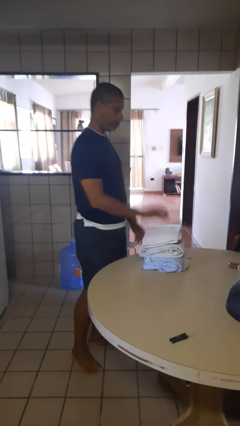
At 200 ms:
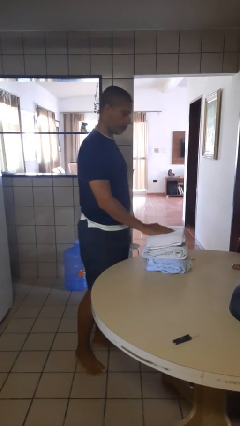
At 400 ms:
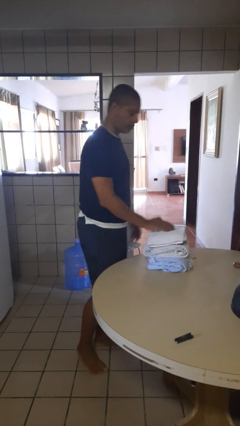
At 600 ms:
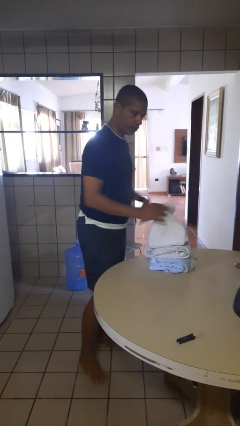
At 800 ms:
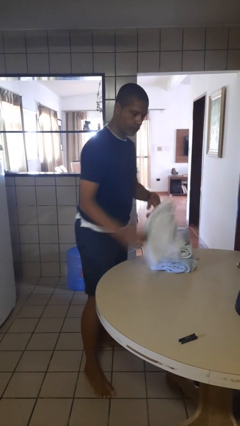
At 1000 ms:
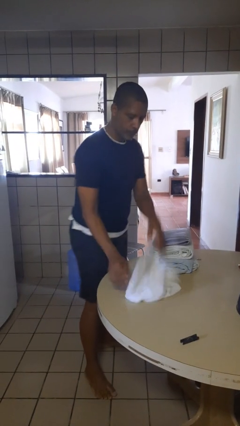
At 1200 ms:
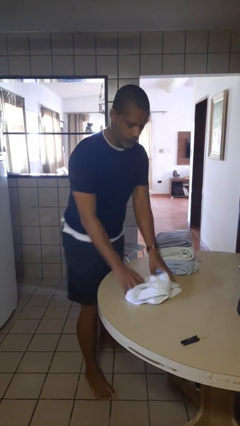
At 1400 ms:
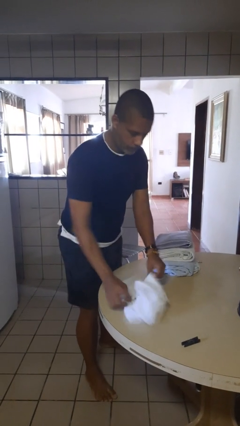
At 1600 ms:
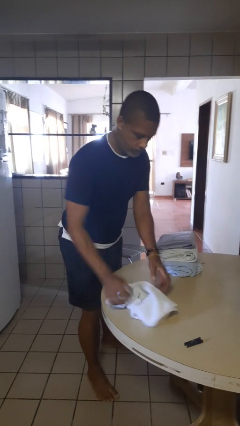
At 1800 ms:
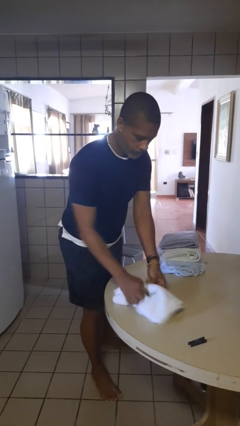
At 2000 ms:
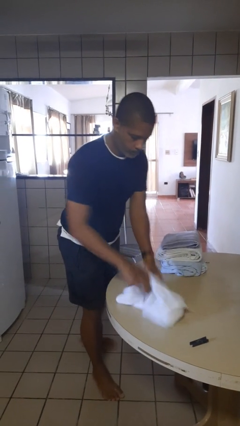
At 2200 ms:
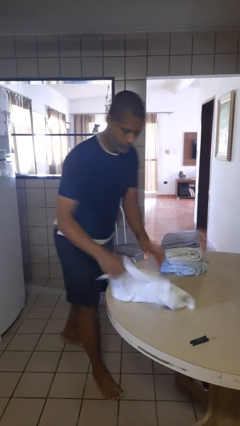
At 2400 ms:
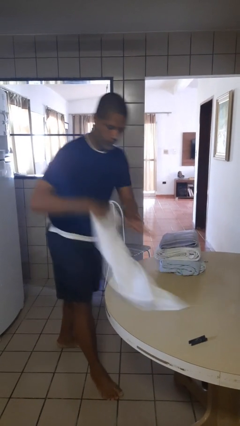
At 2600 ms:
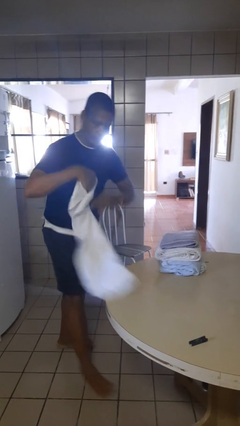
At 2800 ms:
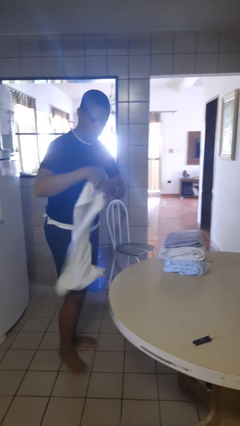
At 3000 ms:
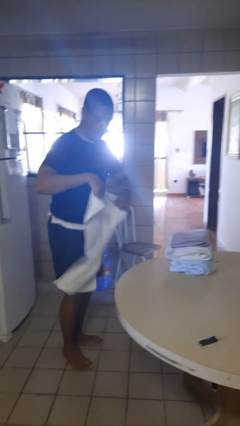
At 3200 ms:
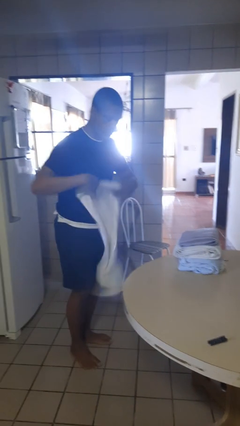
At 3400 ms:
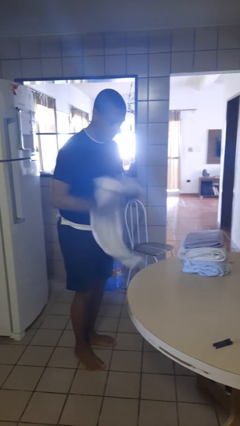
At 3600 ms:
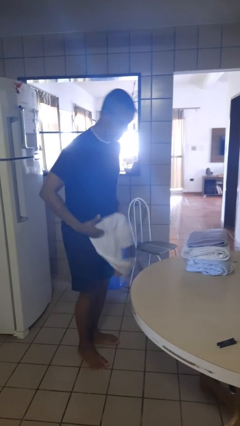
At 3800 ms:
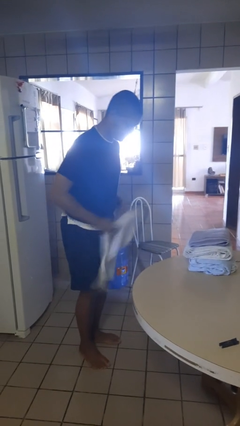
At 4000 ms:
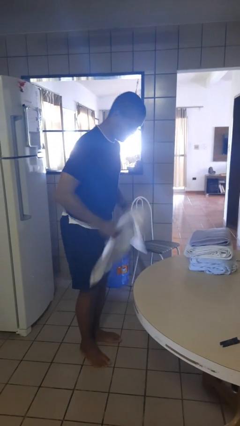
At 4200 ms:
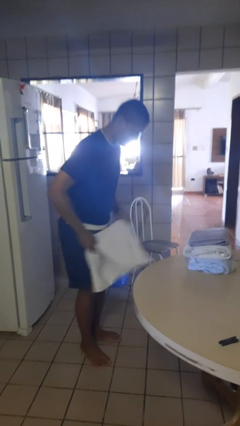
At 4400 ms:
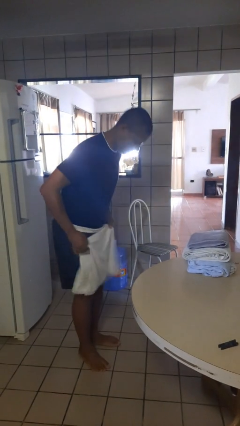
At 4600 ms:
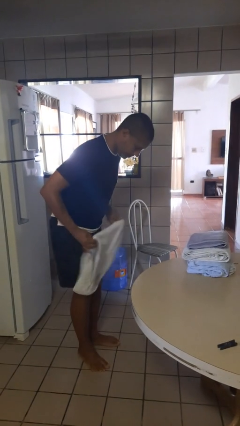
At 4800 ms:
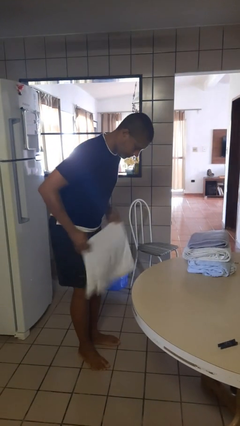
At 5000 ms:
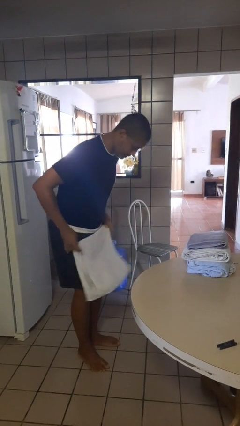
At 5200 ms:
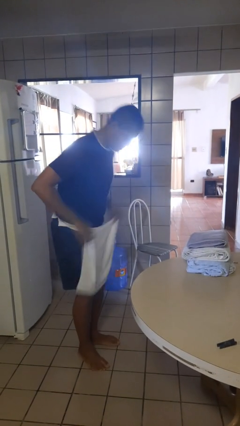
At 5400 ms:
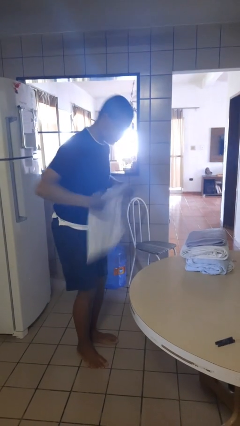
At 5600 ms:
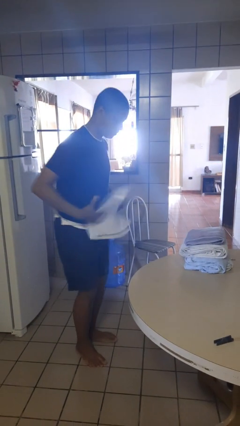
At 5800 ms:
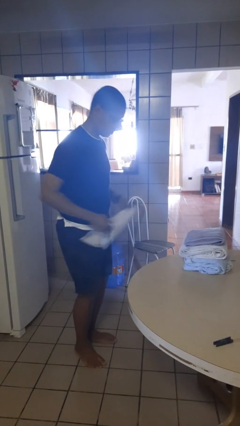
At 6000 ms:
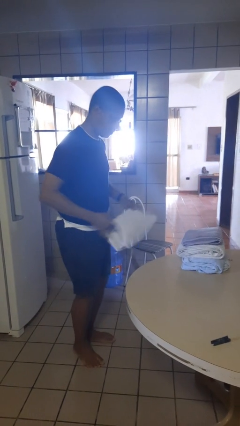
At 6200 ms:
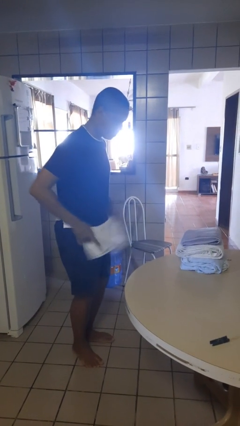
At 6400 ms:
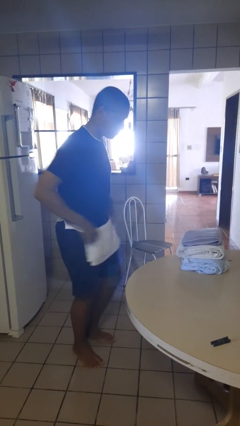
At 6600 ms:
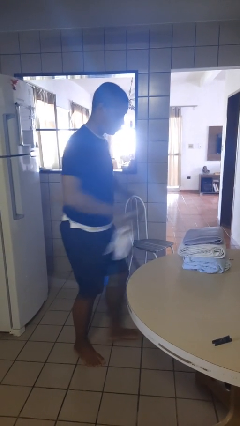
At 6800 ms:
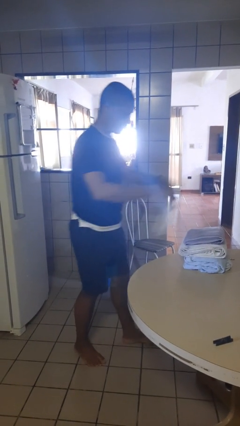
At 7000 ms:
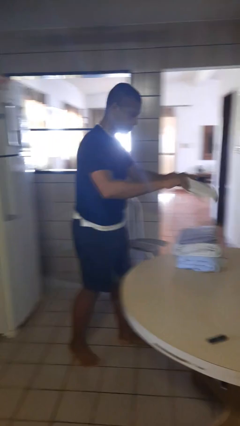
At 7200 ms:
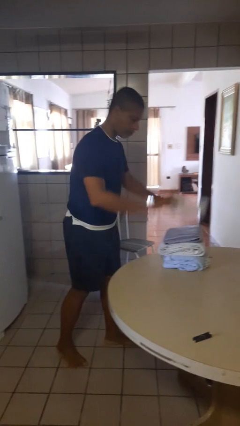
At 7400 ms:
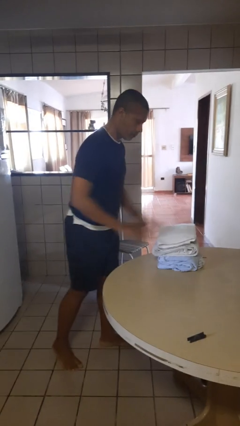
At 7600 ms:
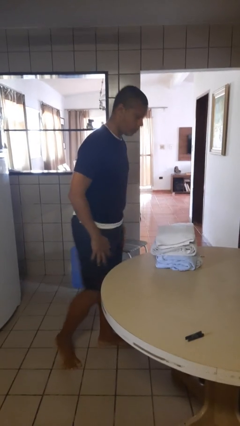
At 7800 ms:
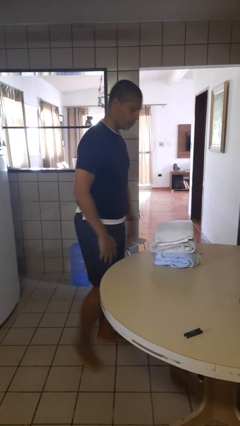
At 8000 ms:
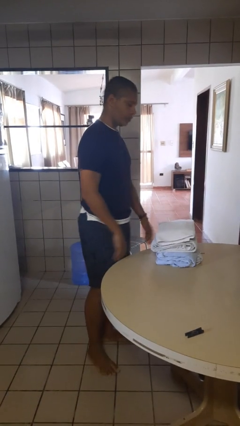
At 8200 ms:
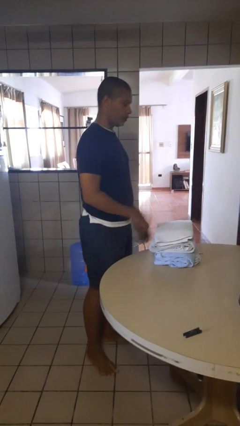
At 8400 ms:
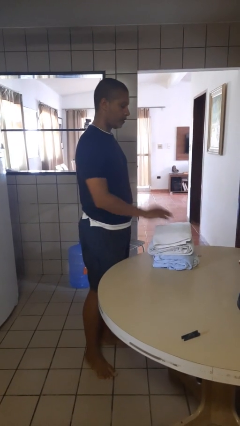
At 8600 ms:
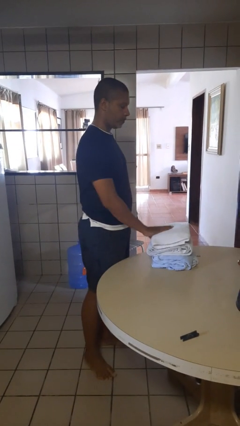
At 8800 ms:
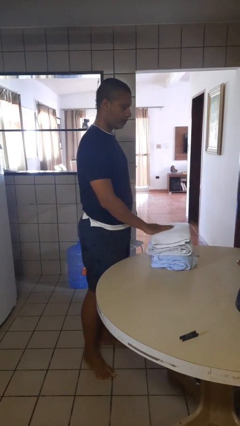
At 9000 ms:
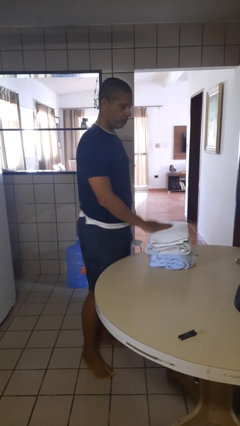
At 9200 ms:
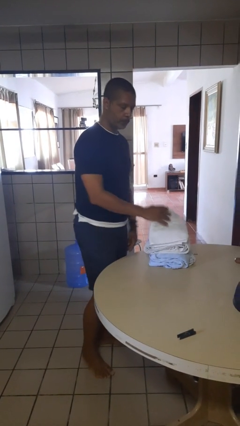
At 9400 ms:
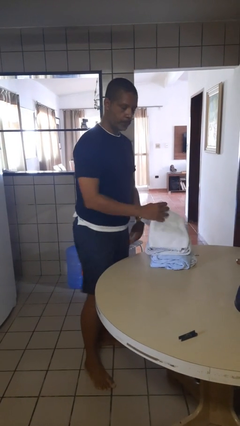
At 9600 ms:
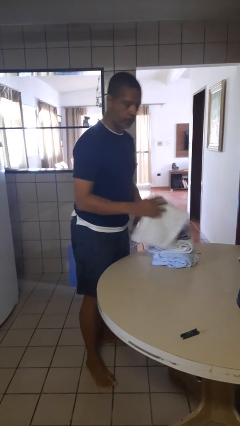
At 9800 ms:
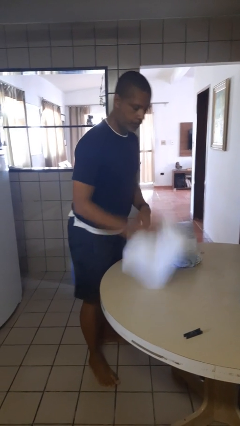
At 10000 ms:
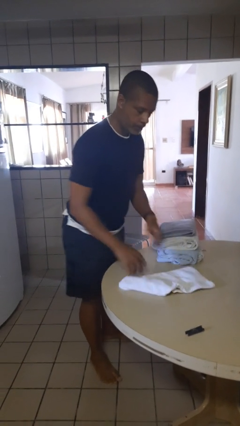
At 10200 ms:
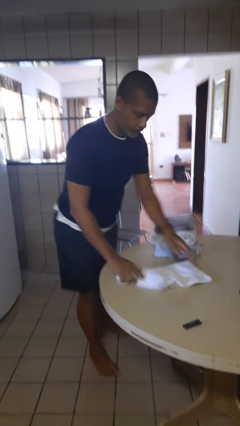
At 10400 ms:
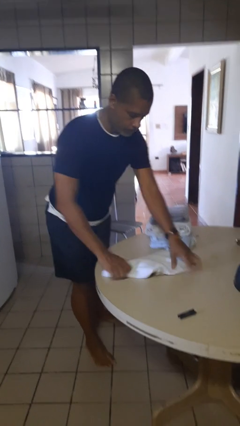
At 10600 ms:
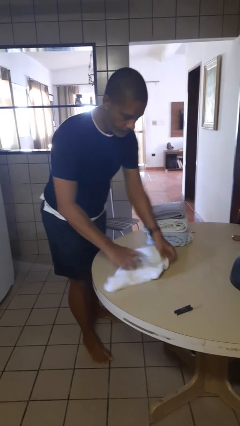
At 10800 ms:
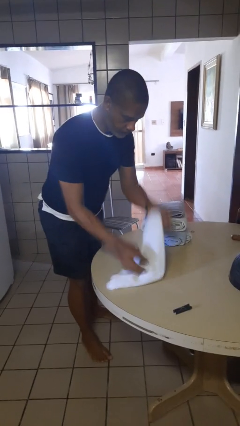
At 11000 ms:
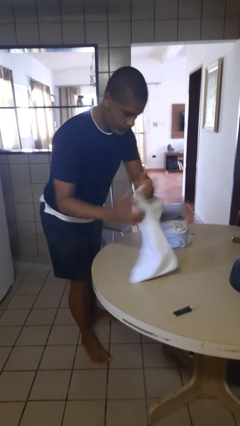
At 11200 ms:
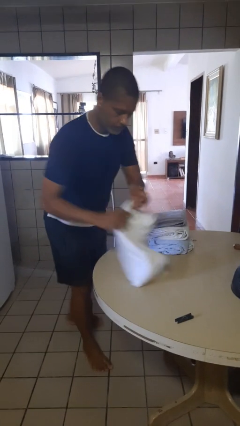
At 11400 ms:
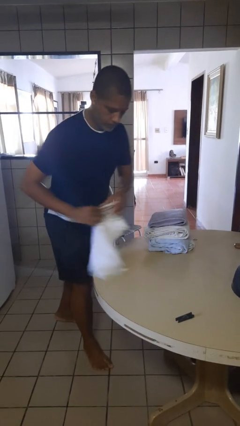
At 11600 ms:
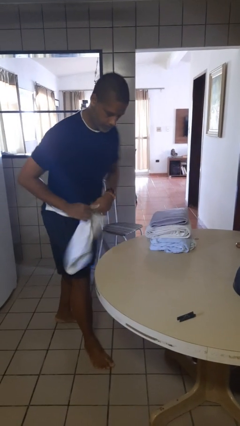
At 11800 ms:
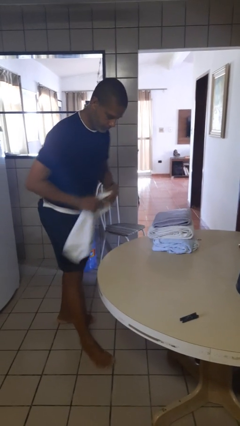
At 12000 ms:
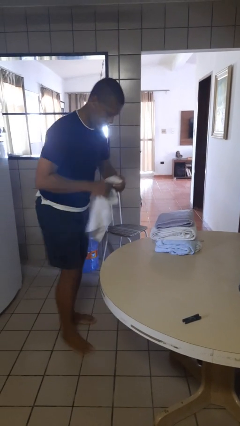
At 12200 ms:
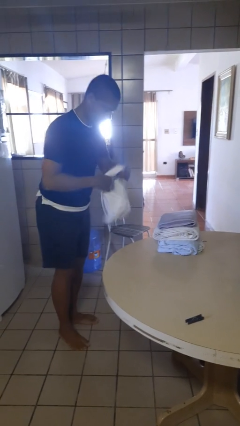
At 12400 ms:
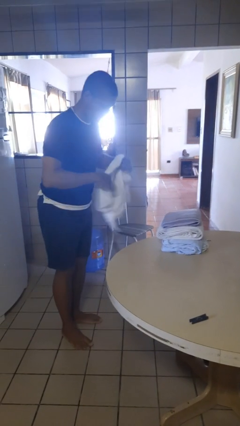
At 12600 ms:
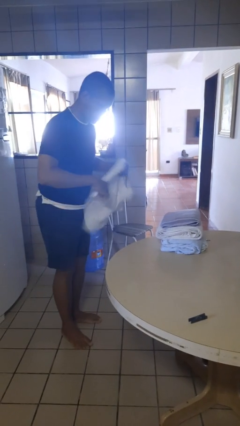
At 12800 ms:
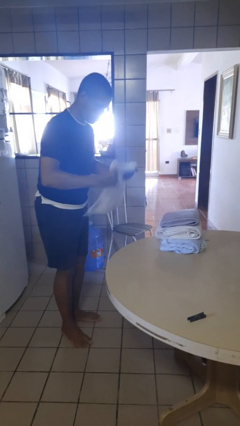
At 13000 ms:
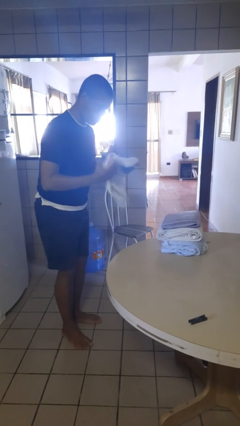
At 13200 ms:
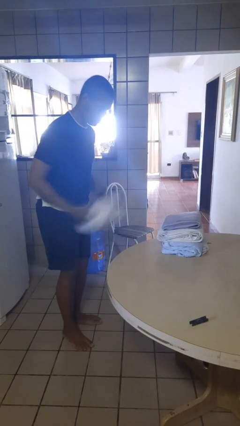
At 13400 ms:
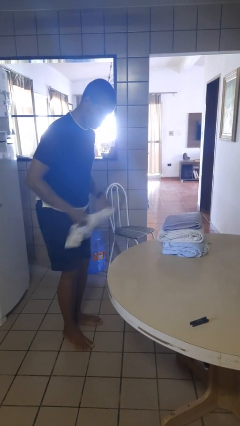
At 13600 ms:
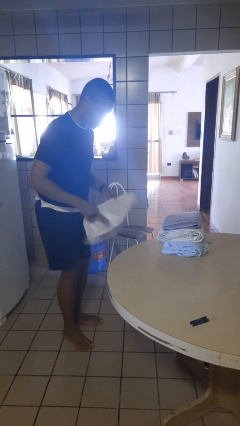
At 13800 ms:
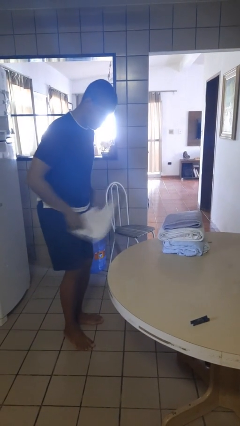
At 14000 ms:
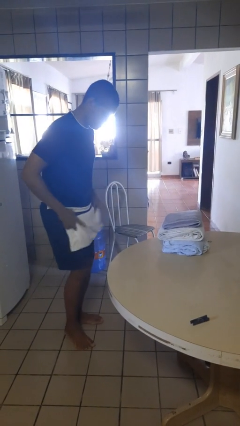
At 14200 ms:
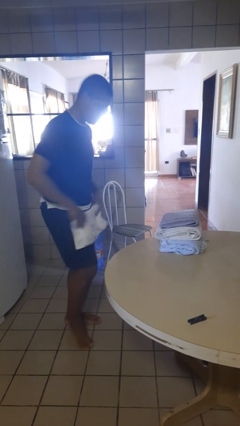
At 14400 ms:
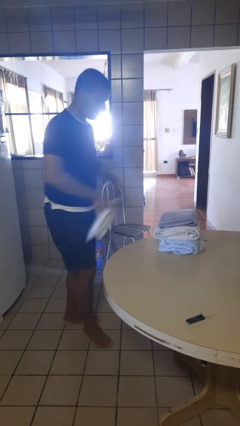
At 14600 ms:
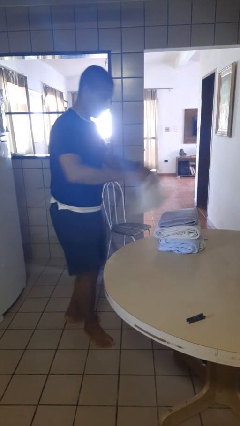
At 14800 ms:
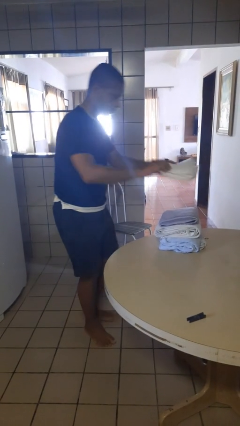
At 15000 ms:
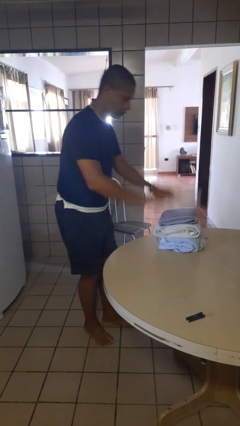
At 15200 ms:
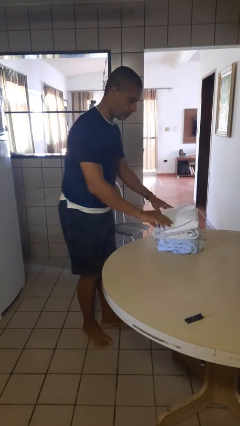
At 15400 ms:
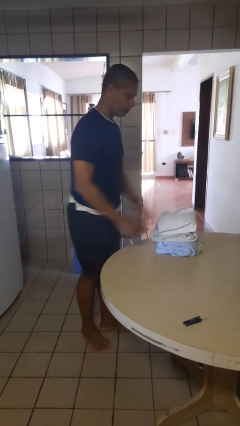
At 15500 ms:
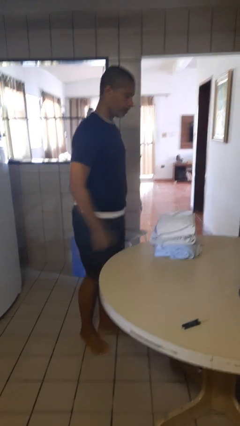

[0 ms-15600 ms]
person folds towel

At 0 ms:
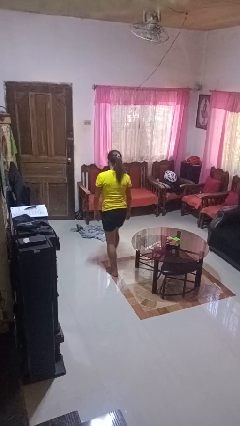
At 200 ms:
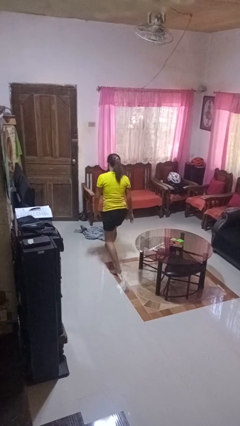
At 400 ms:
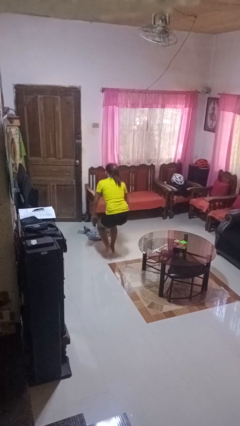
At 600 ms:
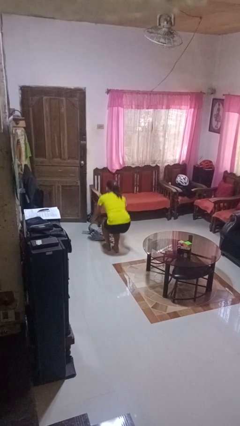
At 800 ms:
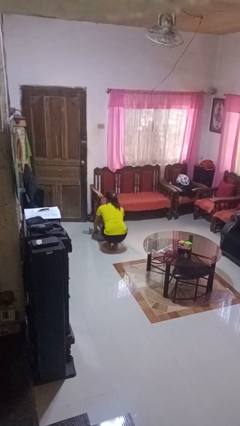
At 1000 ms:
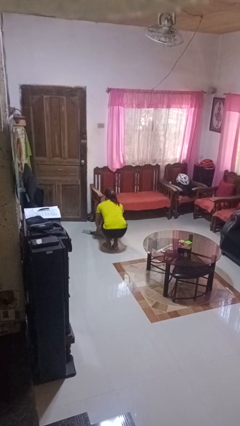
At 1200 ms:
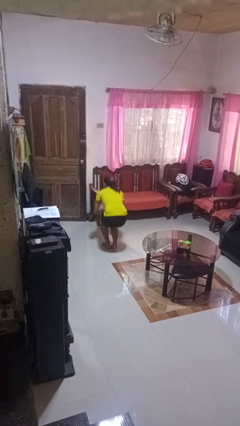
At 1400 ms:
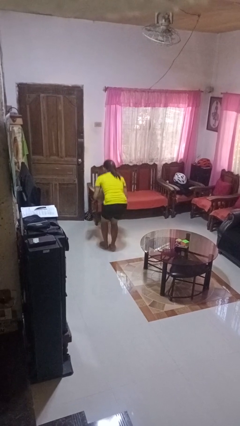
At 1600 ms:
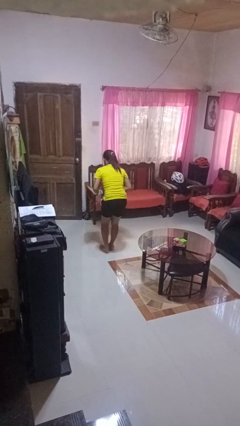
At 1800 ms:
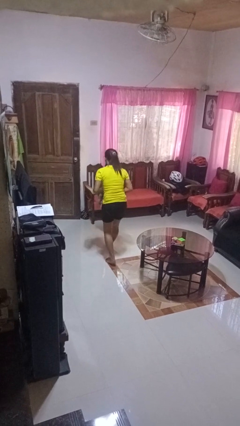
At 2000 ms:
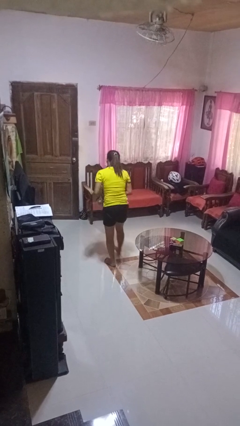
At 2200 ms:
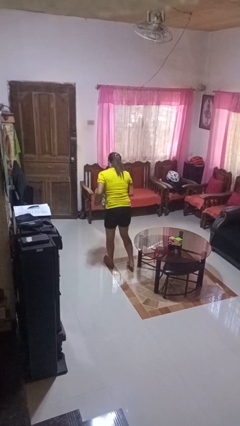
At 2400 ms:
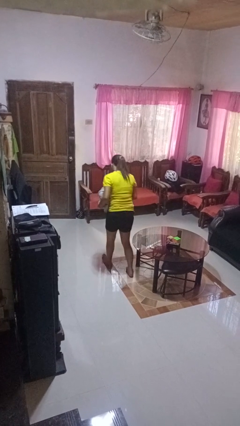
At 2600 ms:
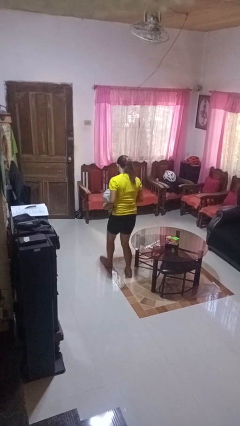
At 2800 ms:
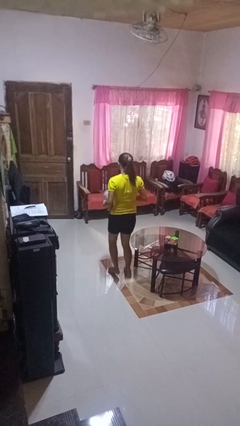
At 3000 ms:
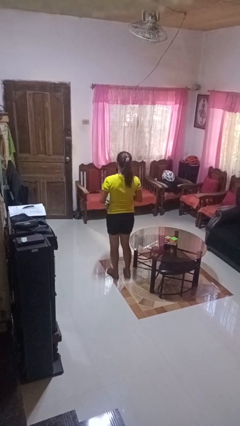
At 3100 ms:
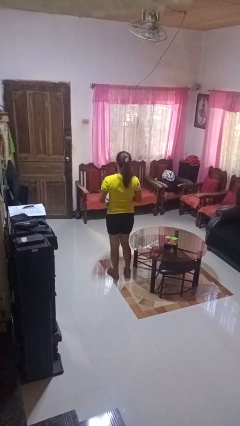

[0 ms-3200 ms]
person picks up object from floor
